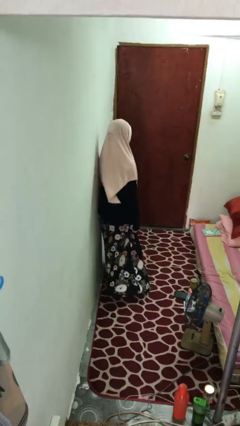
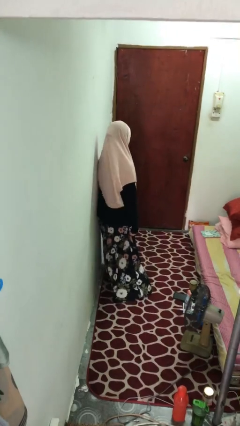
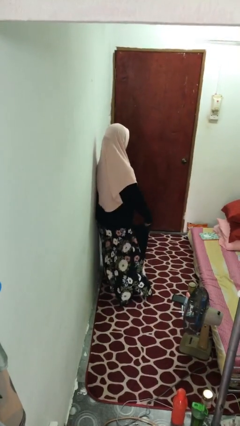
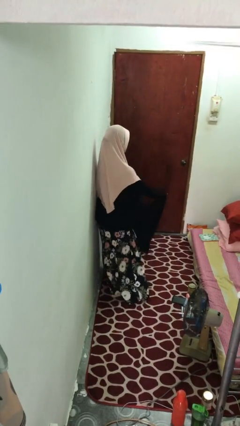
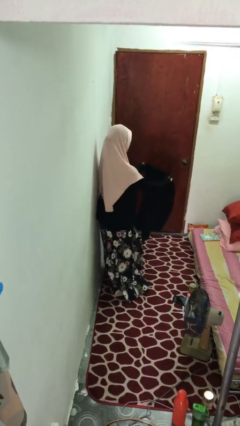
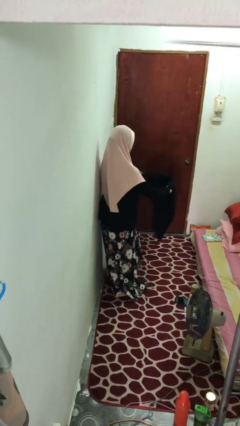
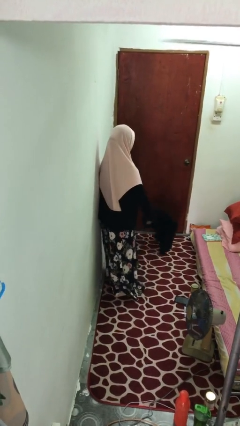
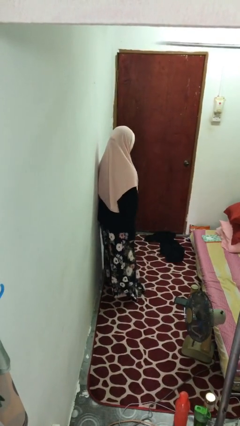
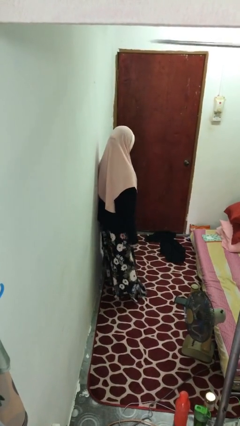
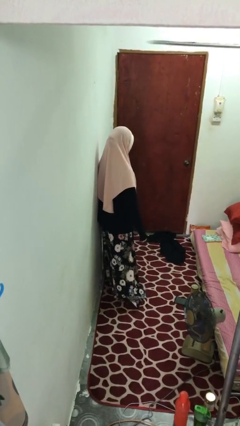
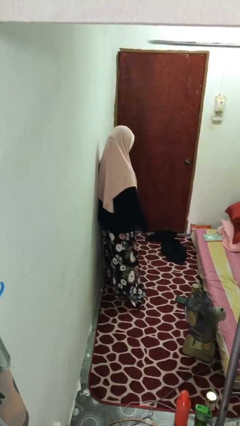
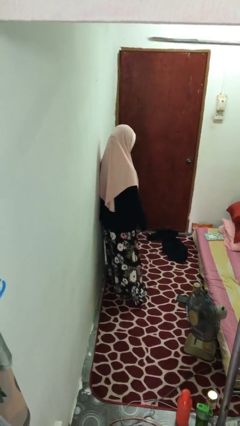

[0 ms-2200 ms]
person throws object to ground

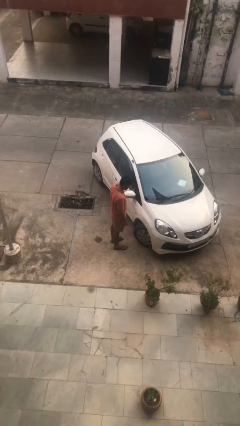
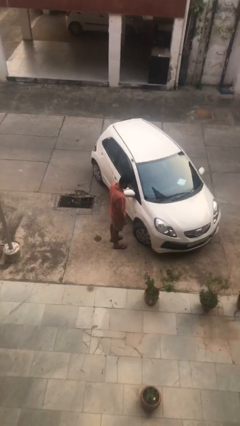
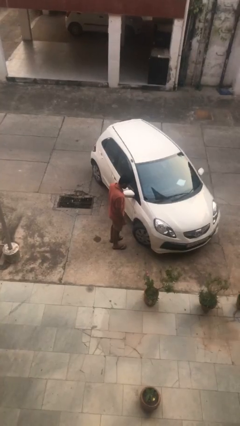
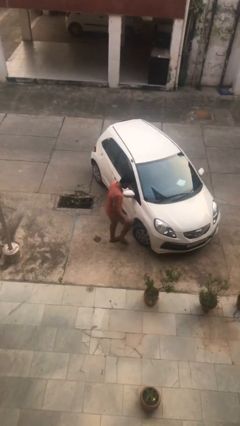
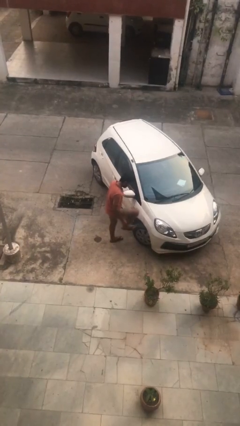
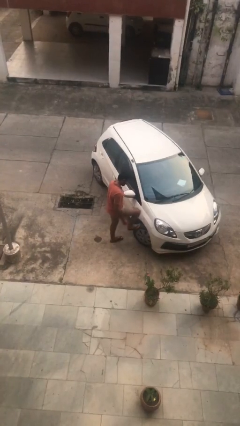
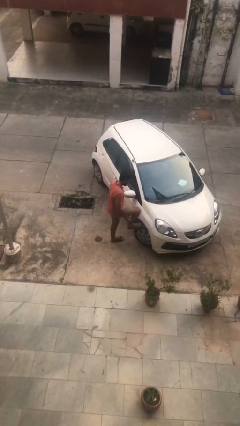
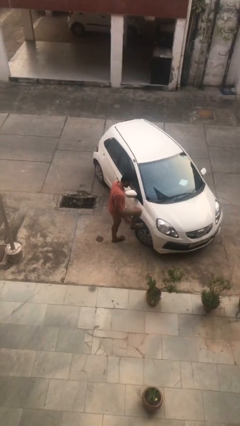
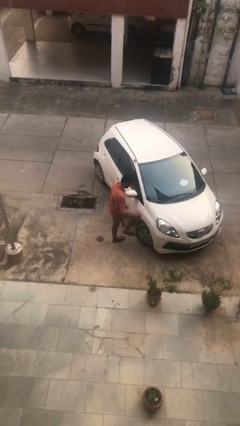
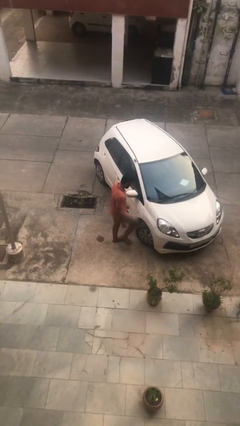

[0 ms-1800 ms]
person kicks car tires

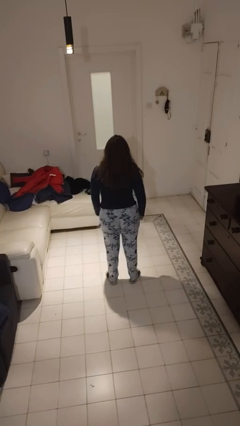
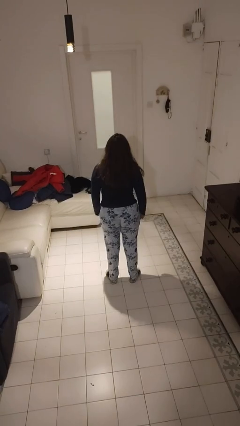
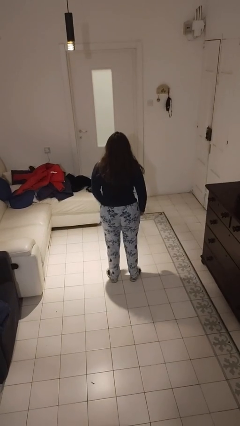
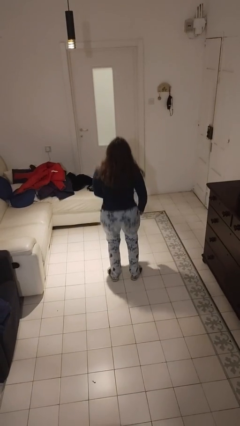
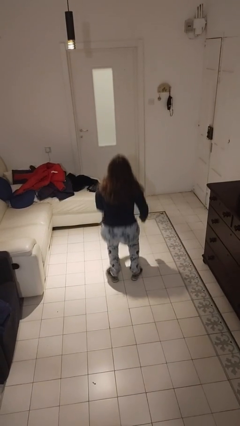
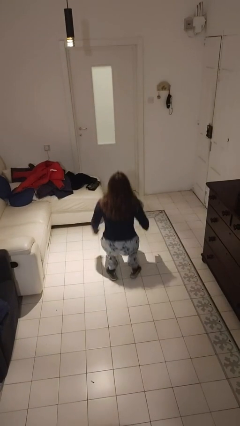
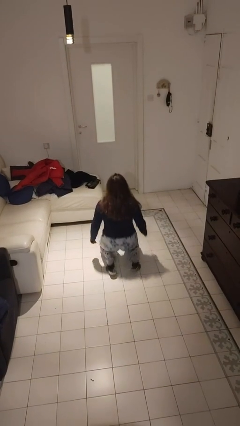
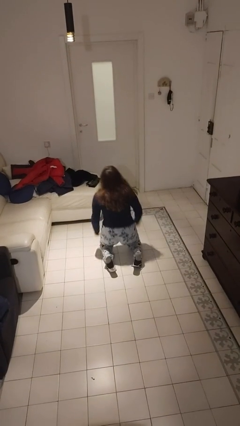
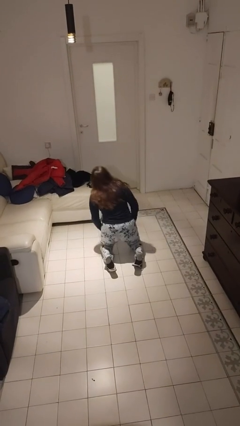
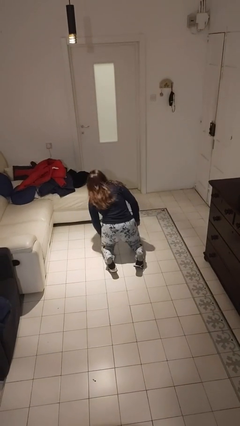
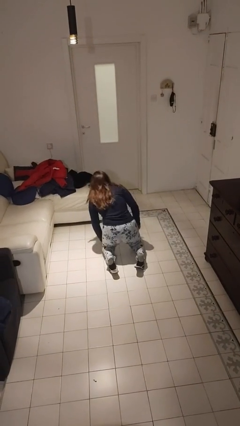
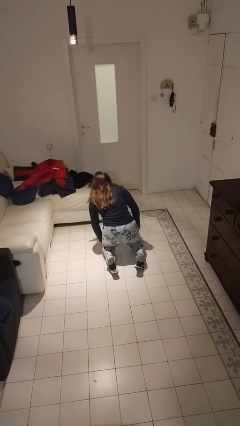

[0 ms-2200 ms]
person falls while standing

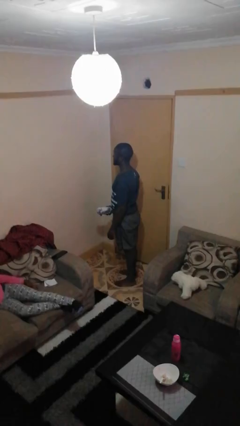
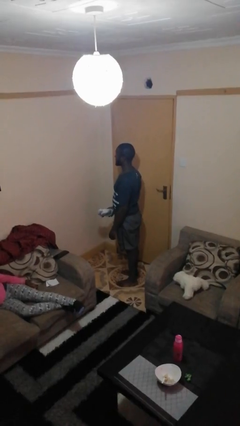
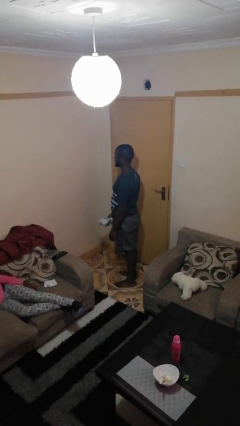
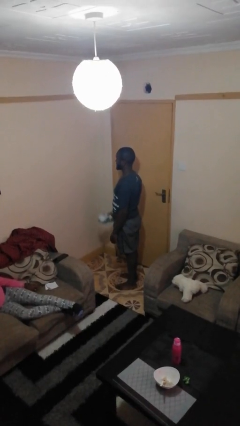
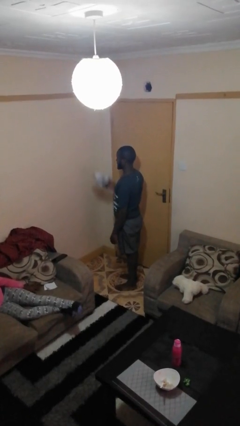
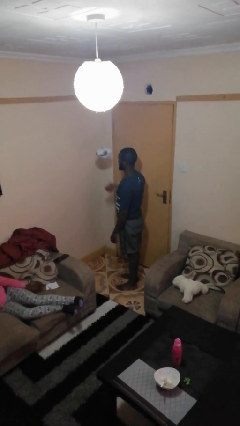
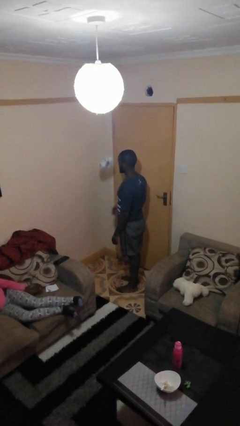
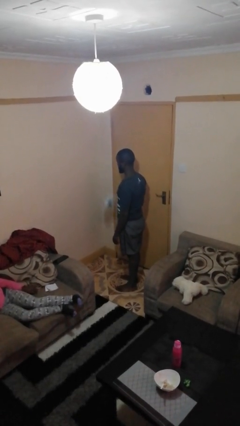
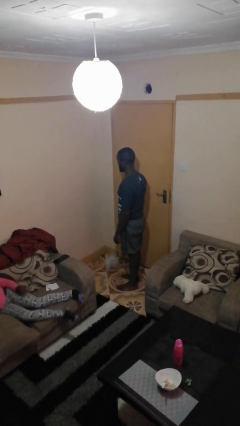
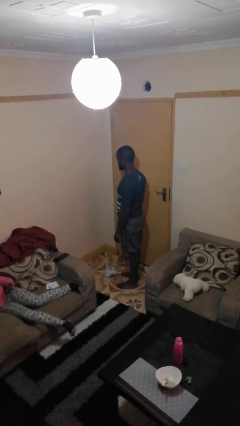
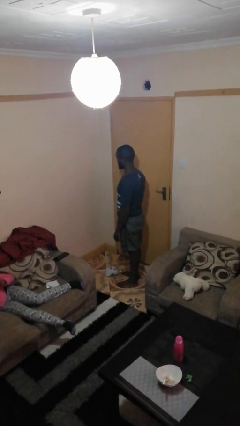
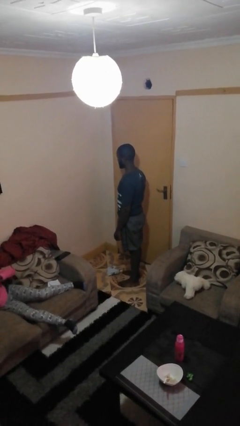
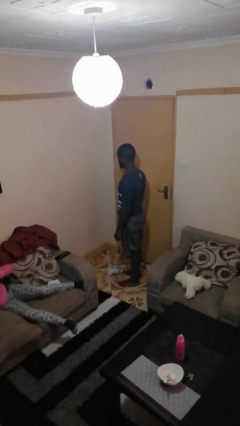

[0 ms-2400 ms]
person throws object into air

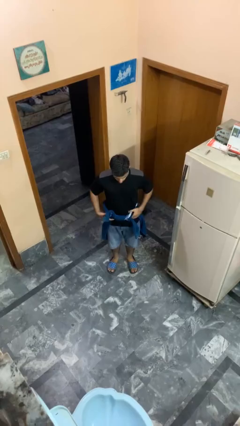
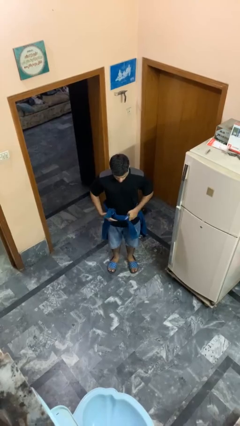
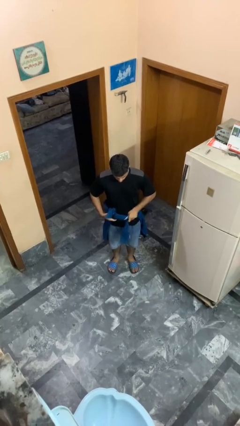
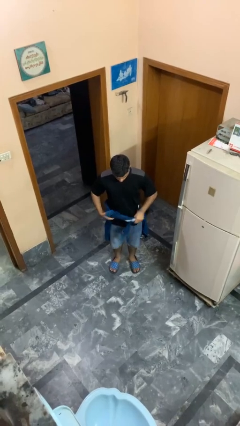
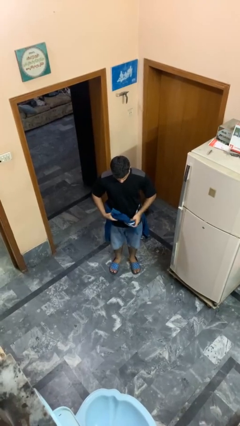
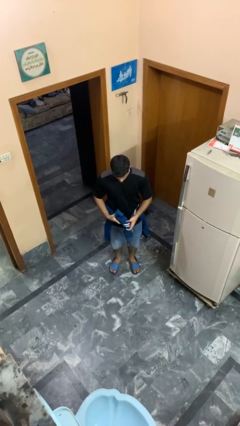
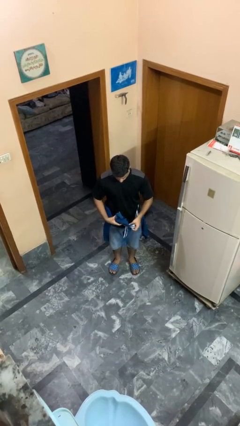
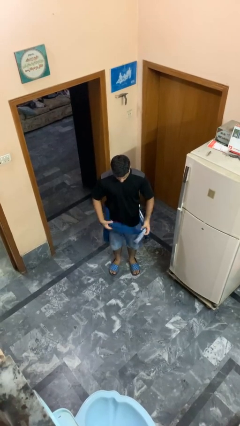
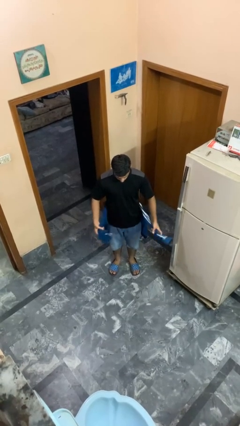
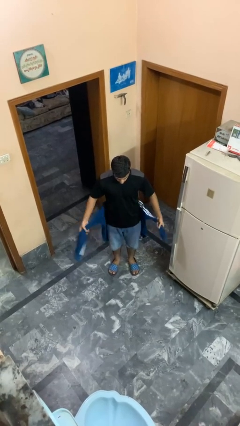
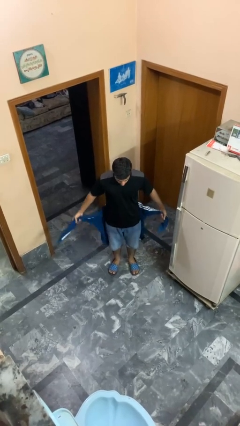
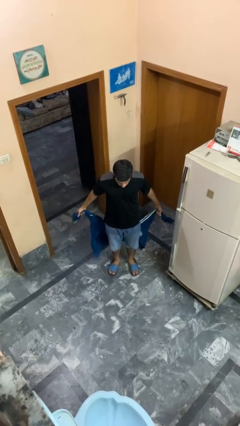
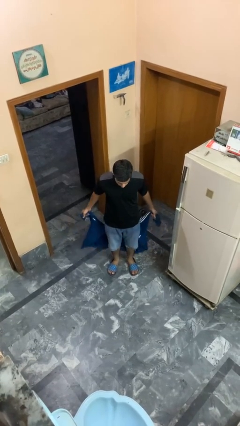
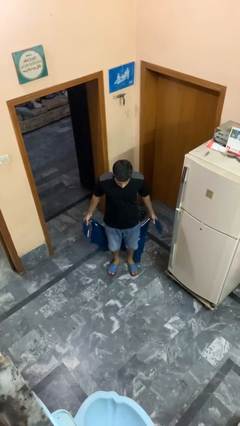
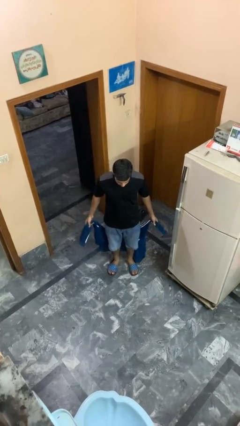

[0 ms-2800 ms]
person unties jacket around waist

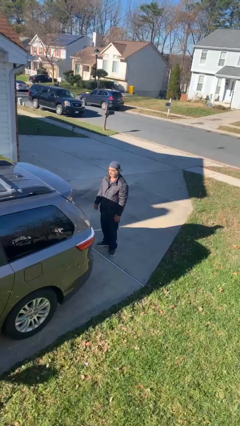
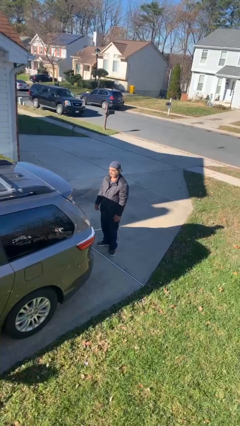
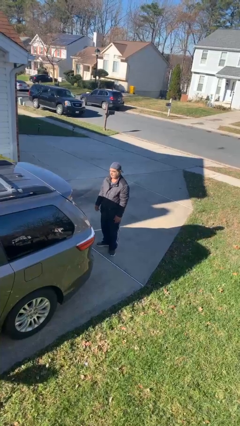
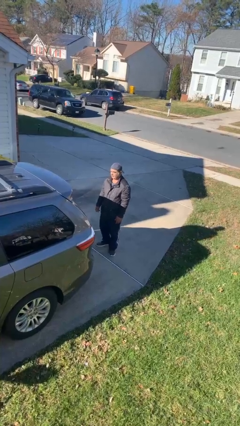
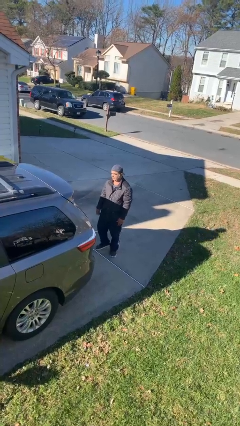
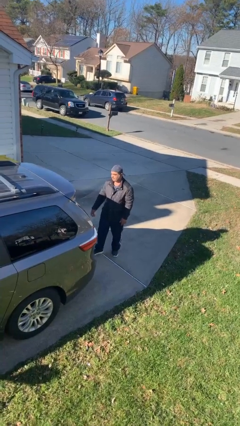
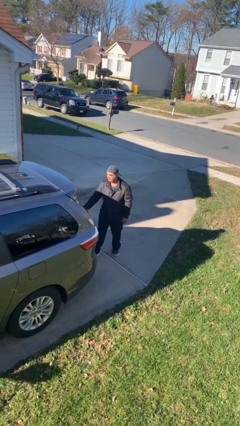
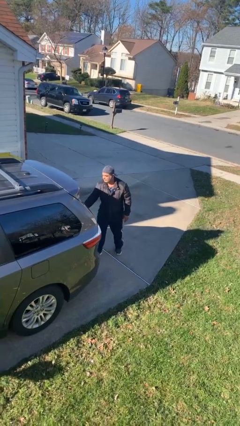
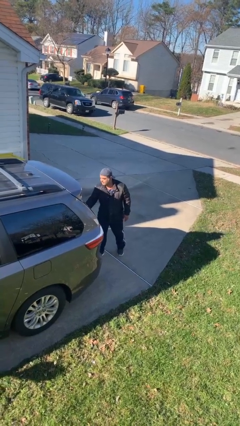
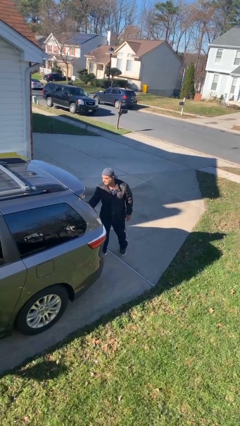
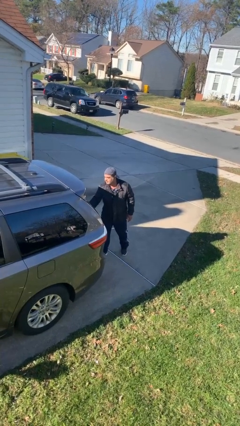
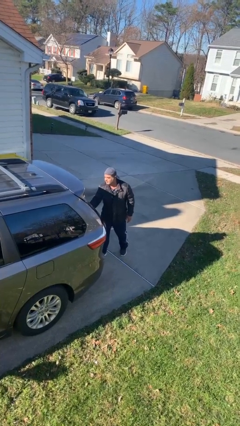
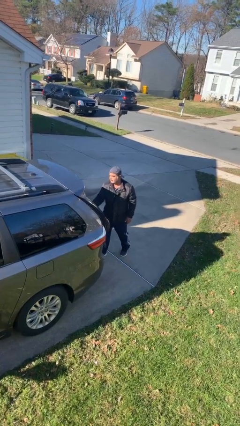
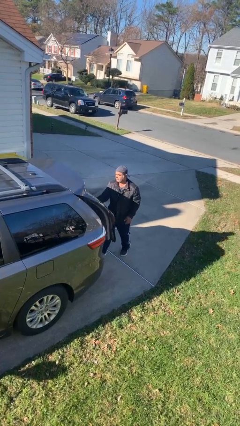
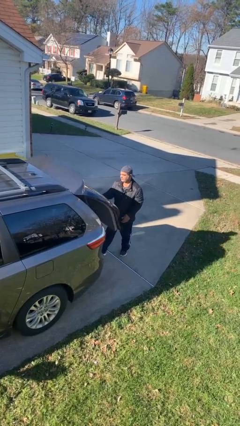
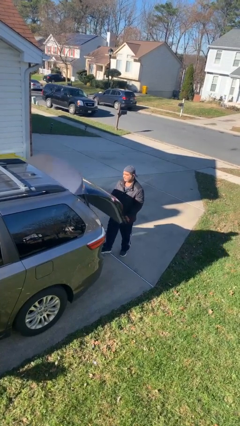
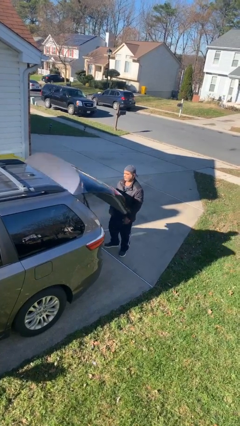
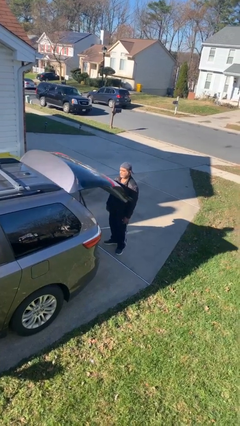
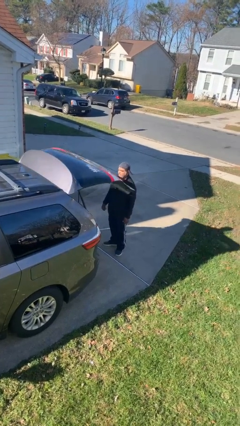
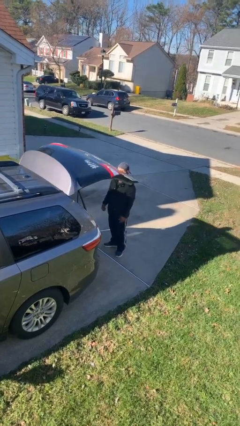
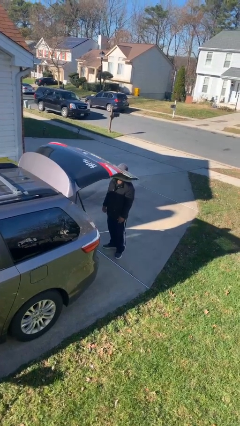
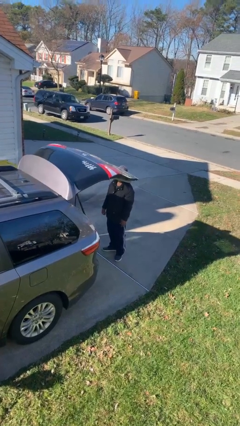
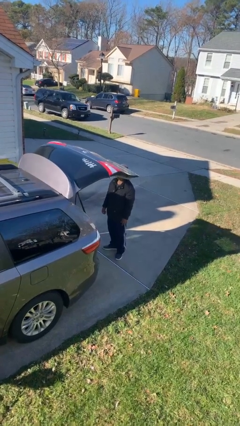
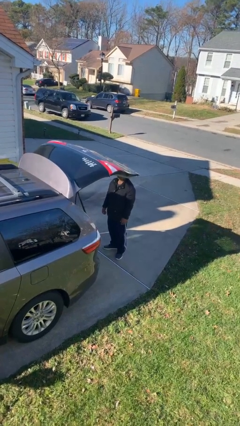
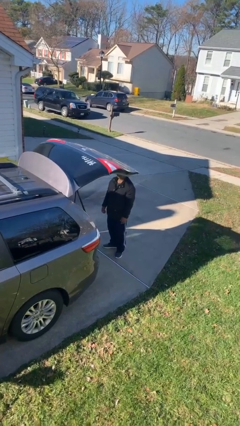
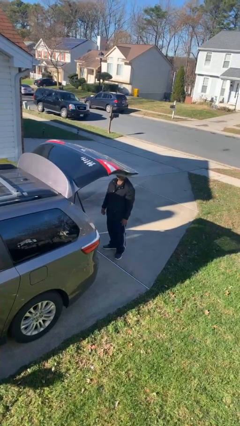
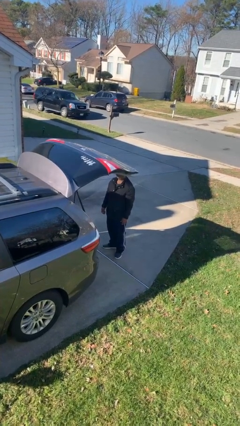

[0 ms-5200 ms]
person opens car trunk

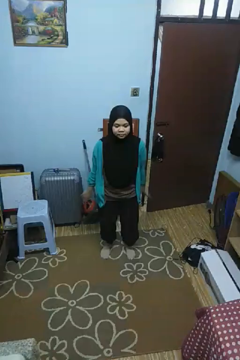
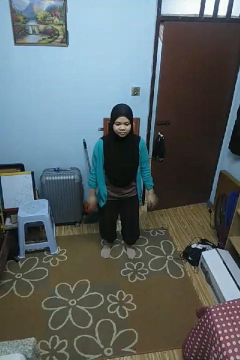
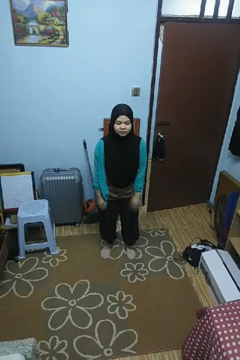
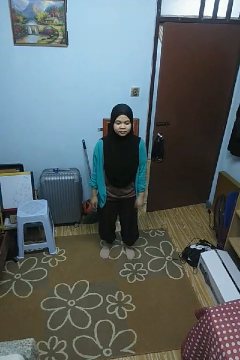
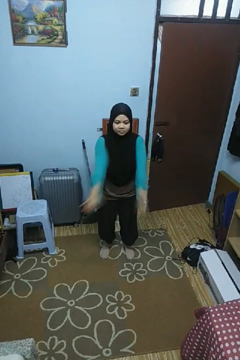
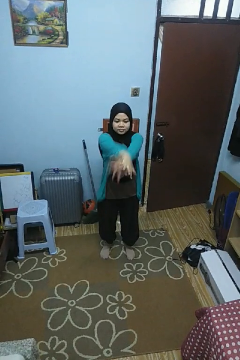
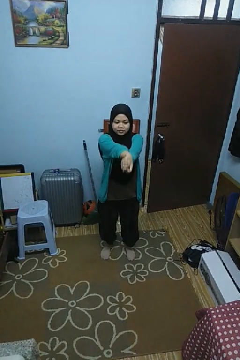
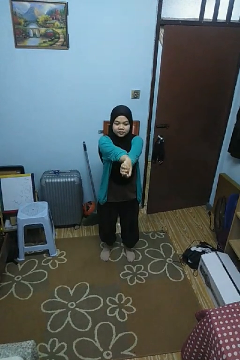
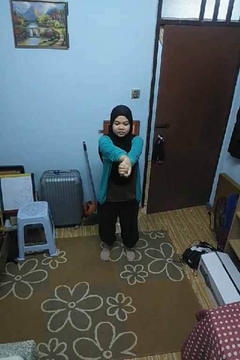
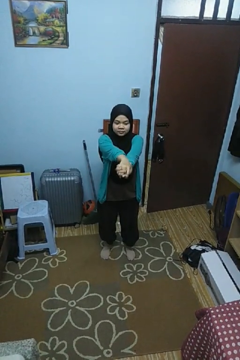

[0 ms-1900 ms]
person crosses arms
